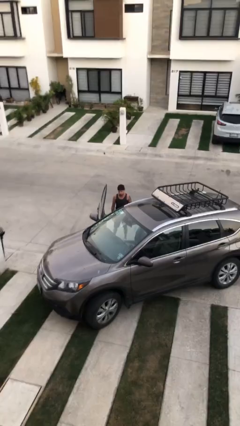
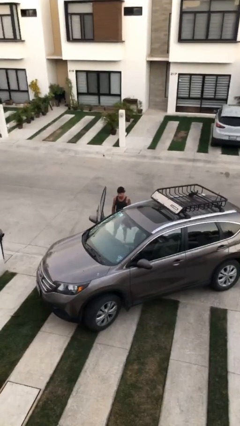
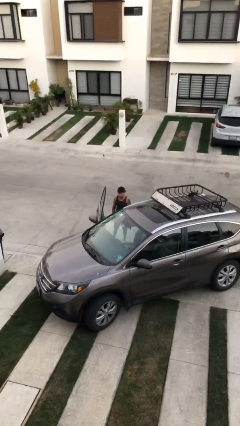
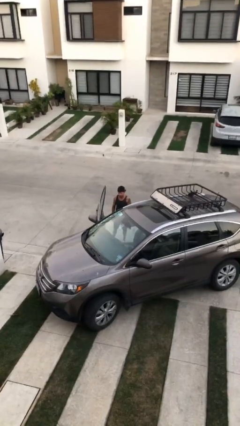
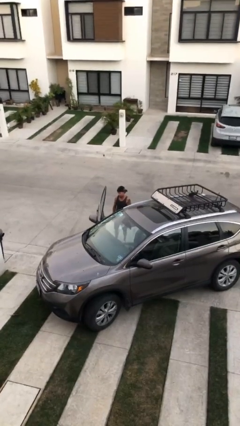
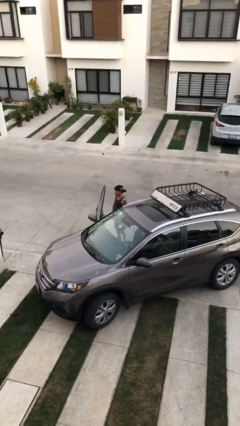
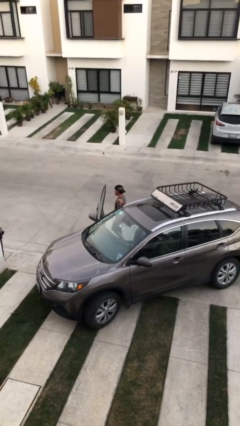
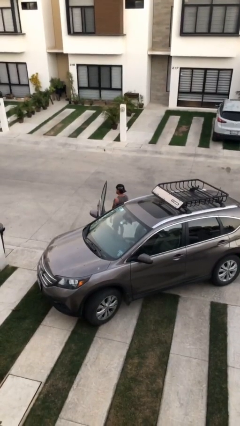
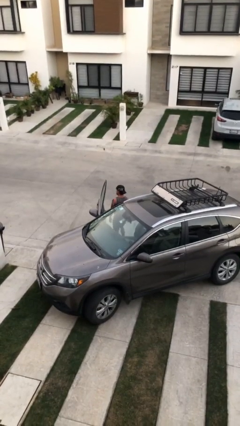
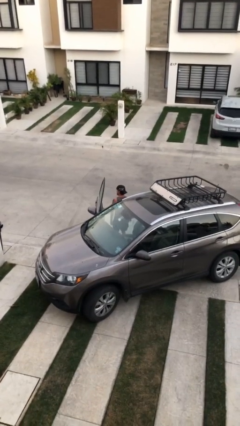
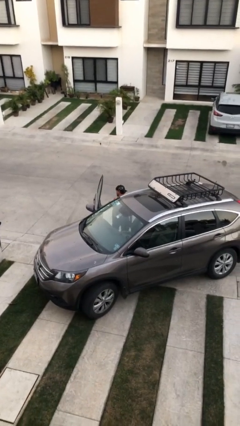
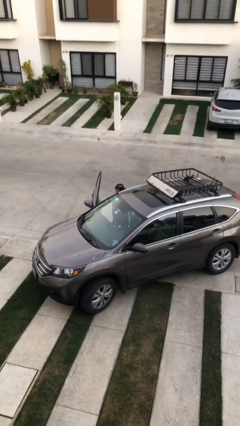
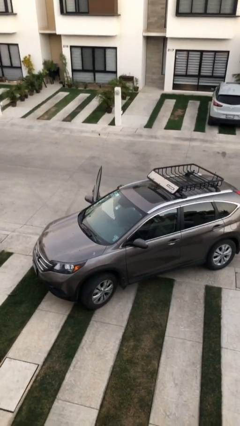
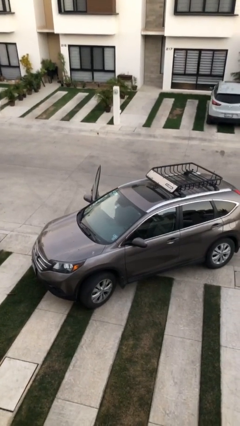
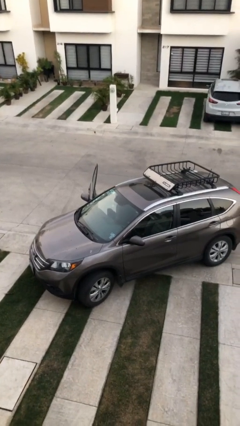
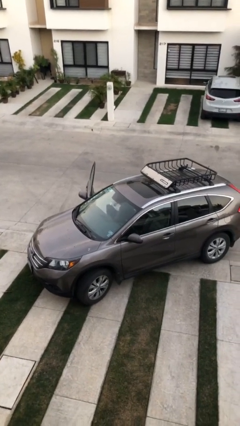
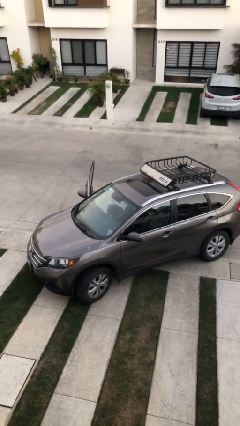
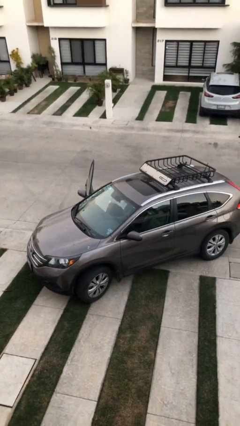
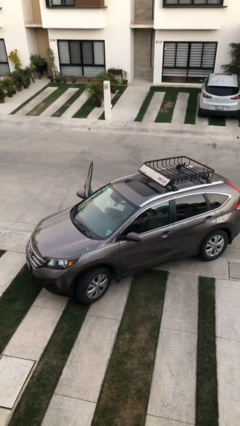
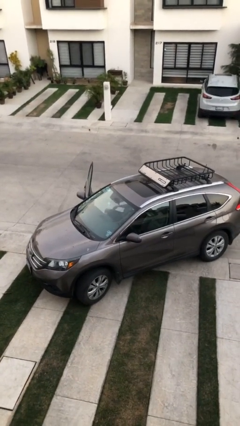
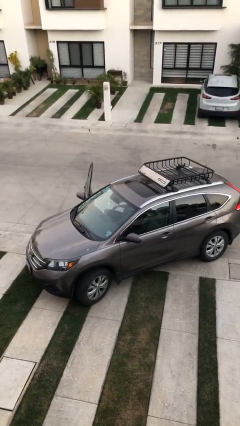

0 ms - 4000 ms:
person enters car

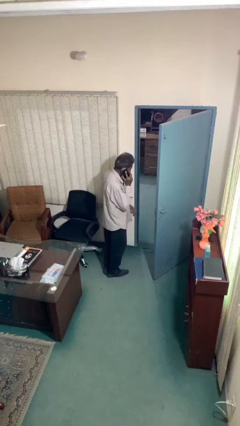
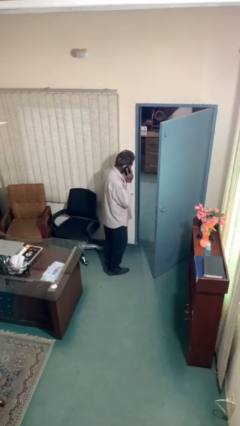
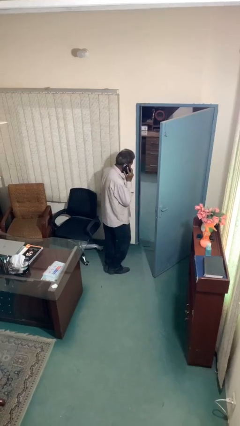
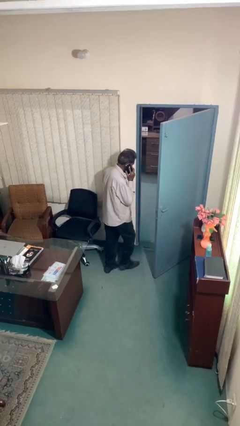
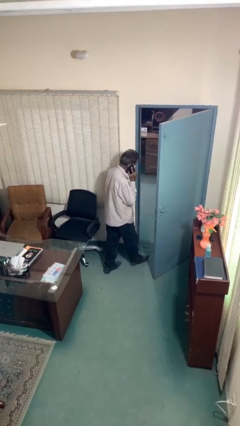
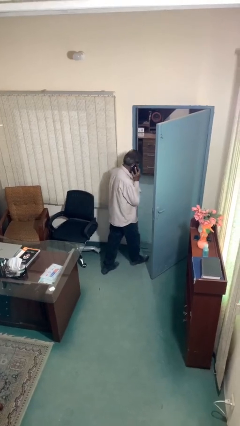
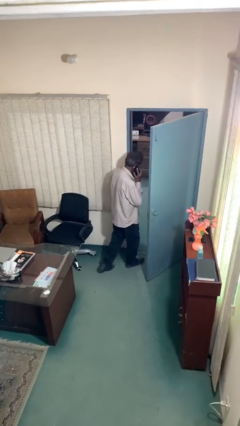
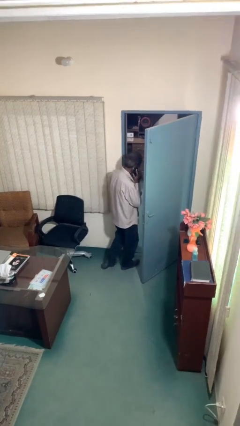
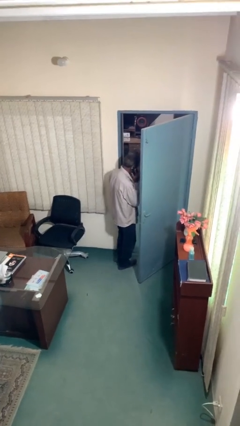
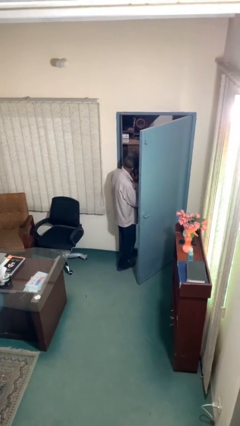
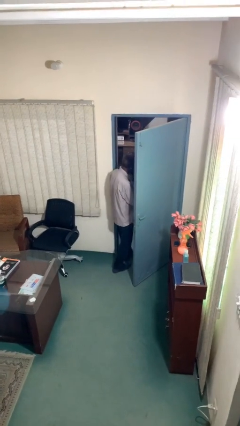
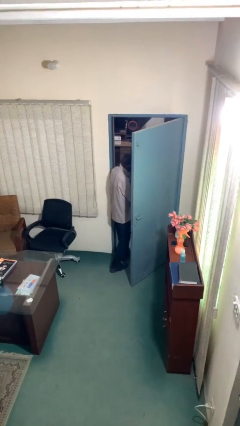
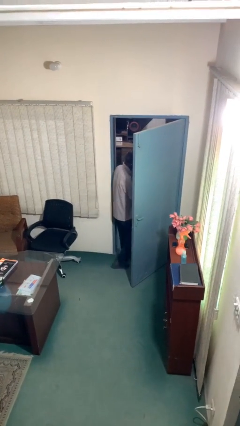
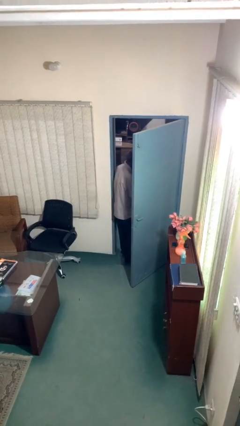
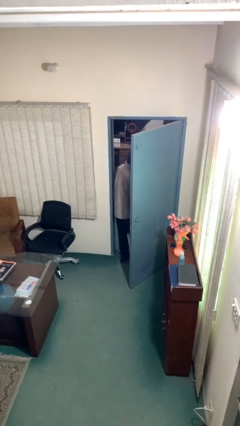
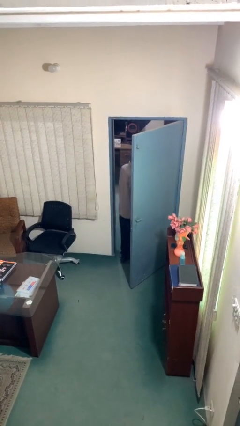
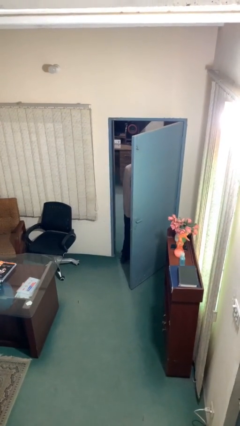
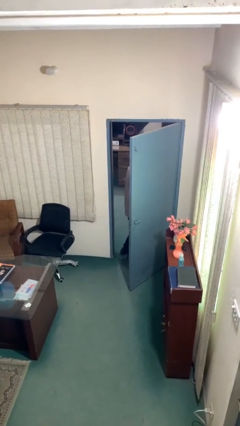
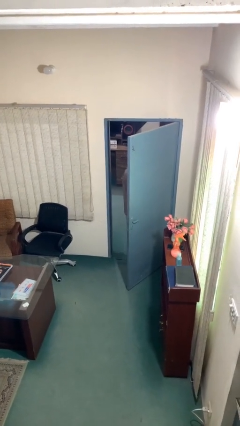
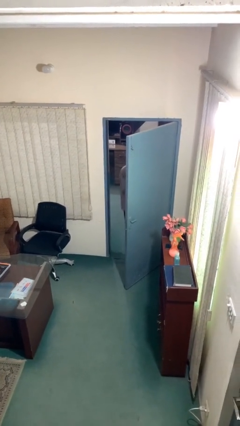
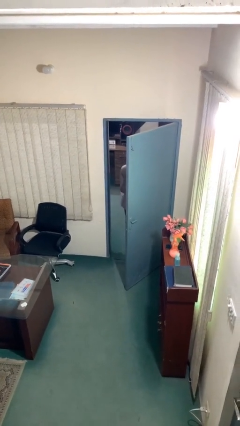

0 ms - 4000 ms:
person exits scene through structure

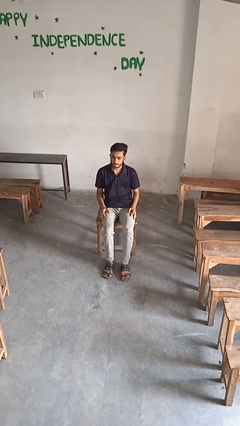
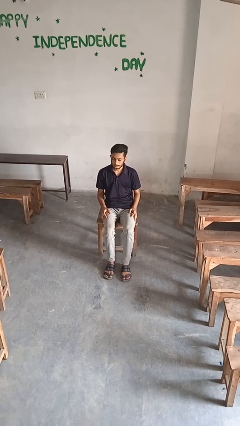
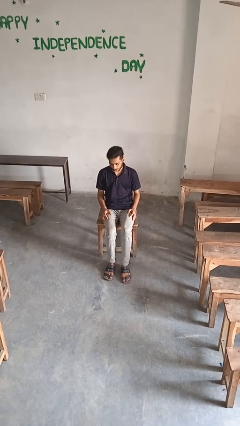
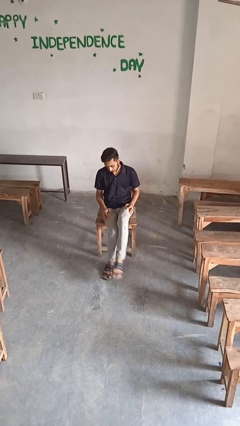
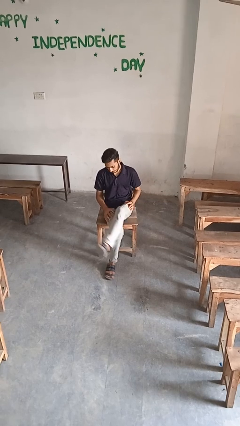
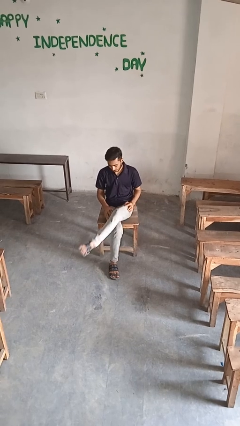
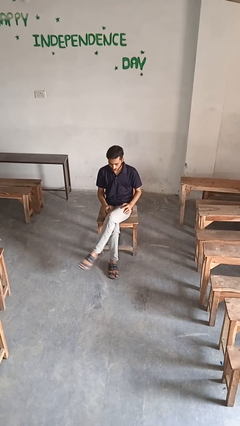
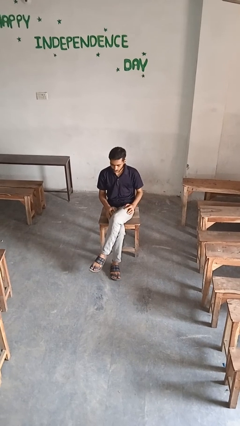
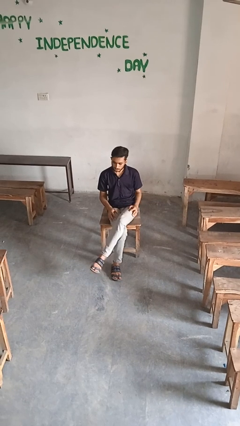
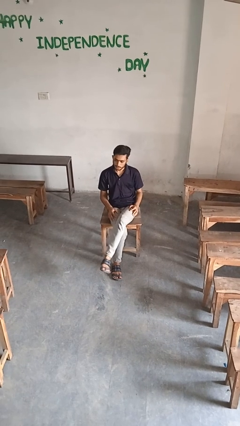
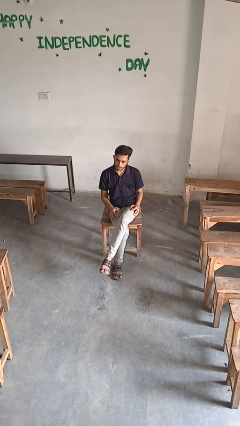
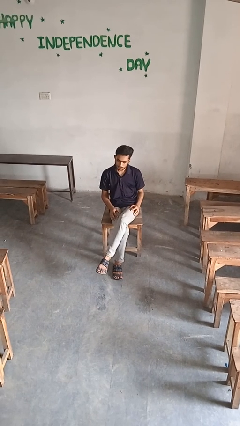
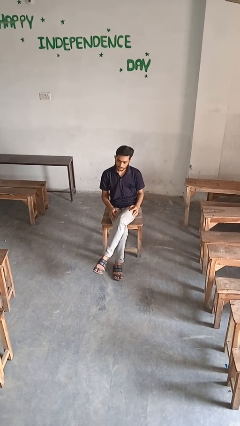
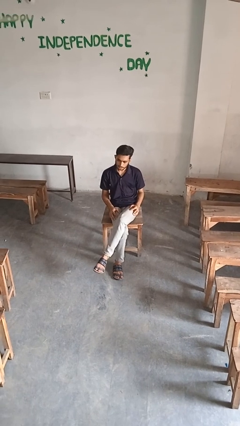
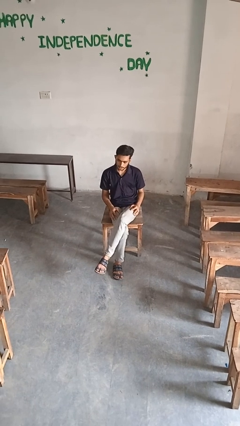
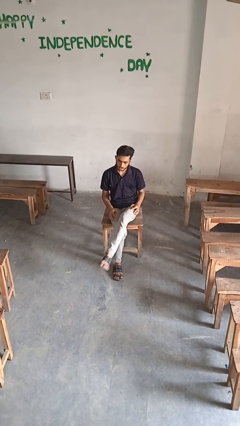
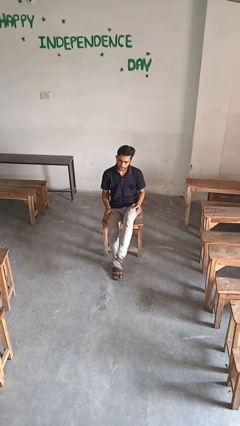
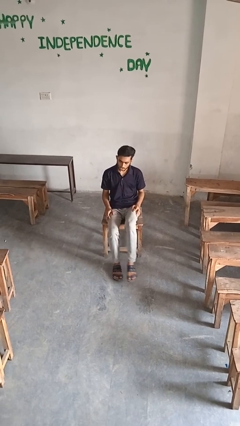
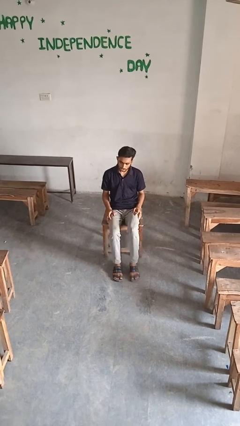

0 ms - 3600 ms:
person crosses legs

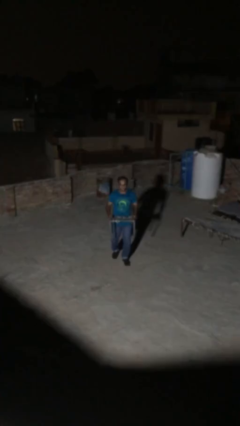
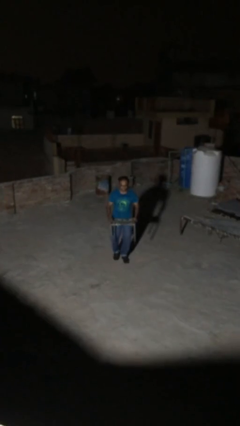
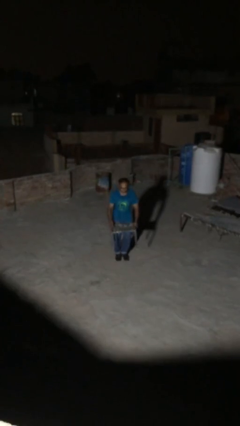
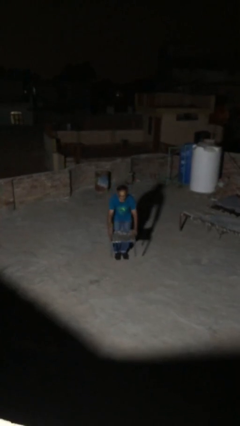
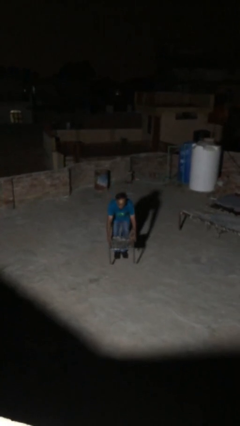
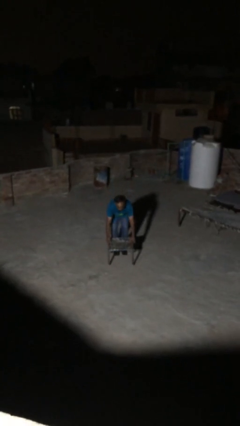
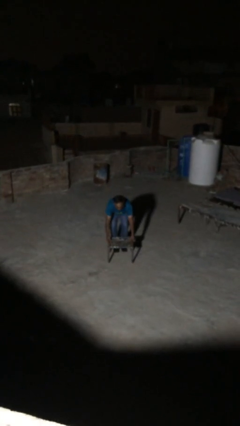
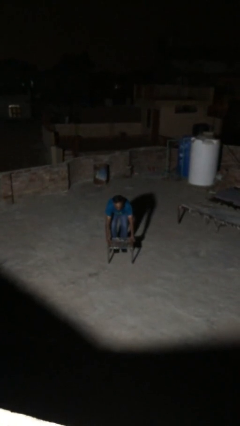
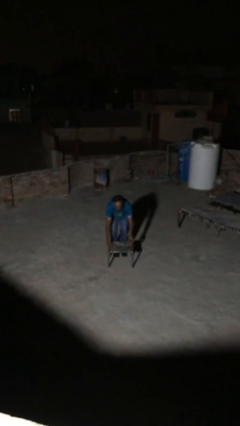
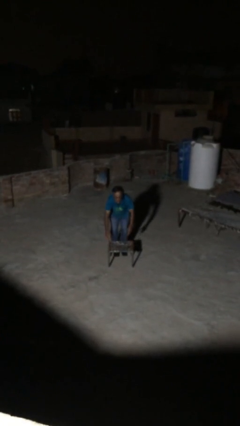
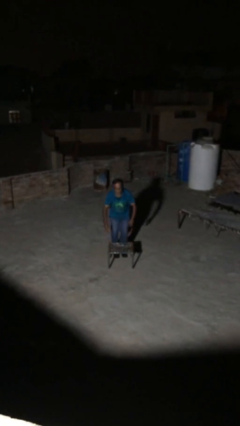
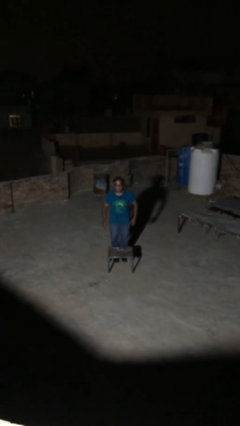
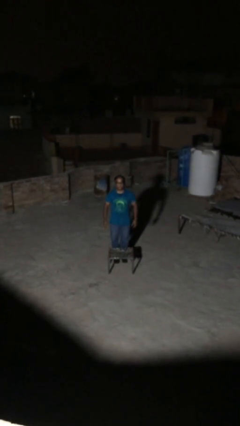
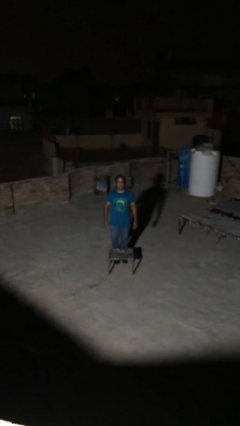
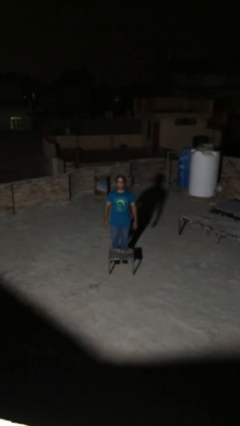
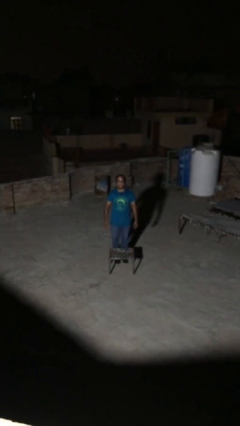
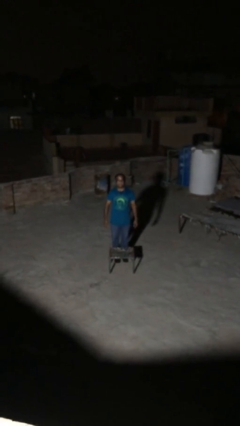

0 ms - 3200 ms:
person puts down object on floor

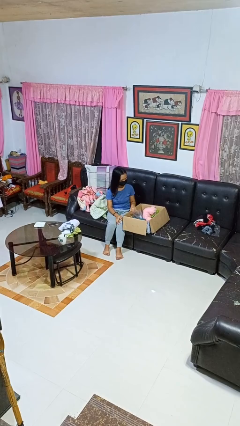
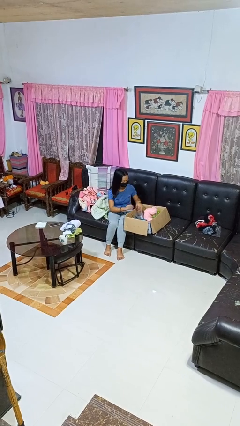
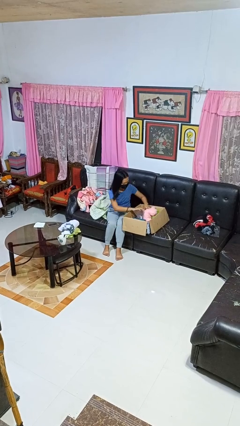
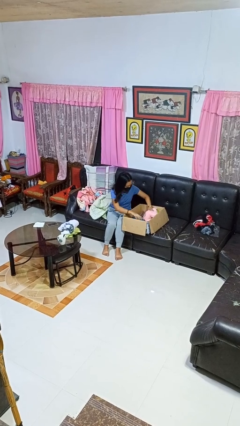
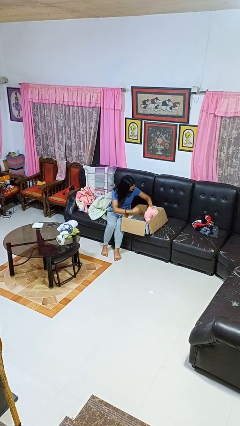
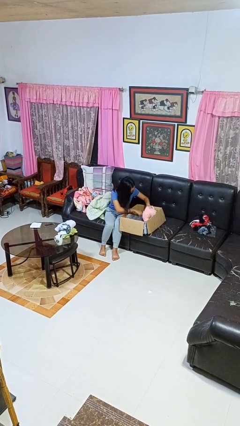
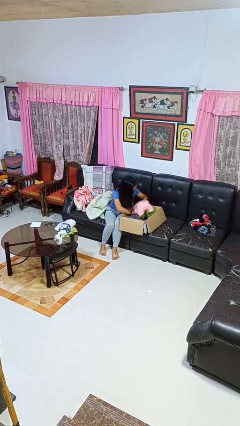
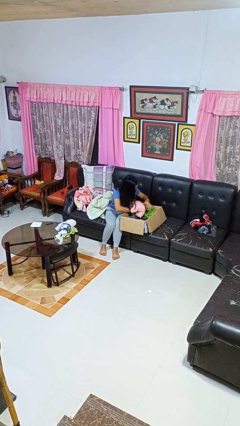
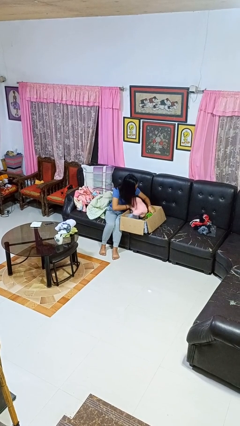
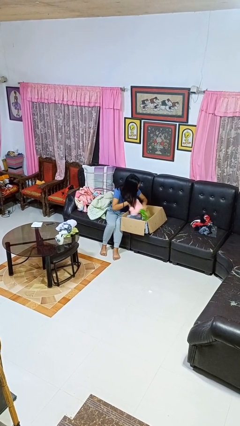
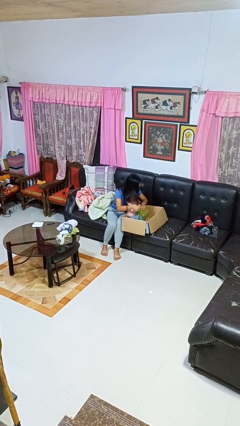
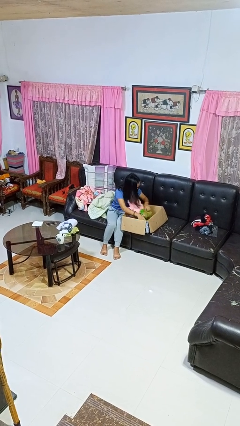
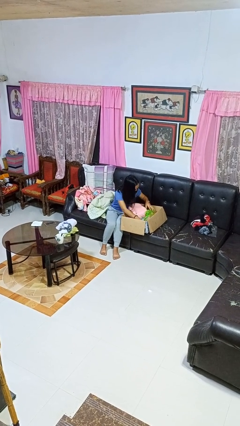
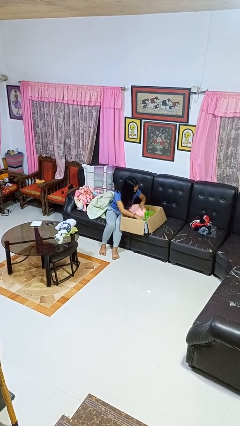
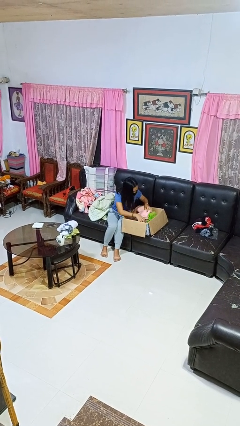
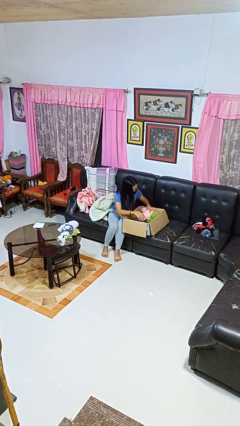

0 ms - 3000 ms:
person searches in box
